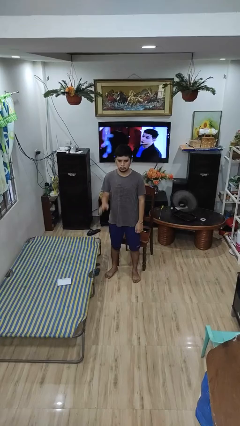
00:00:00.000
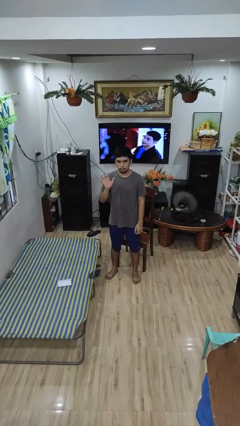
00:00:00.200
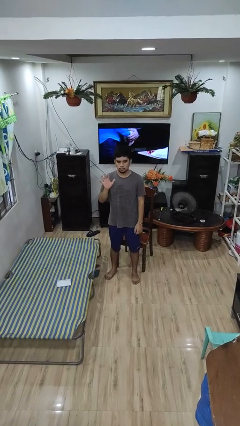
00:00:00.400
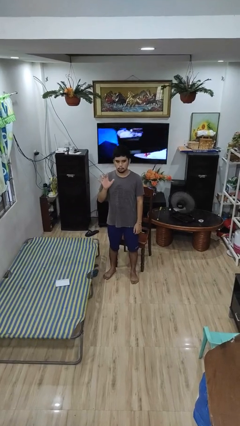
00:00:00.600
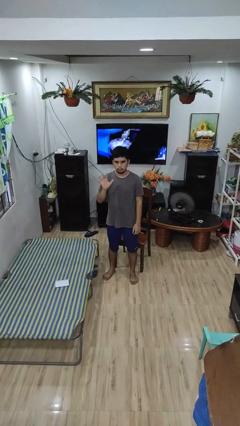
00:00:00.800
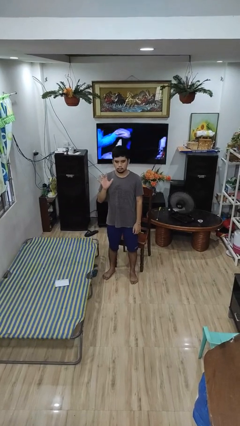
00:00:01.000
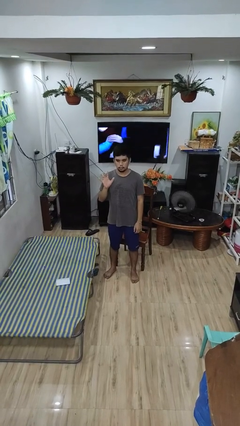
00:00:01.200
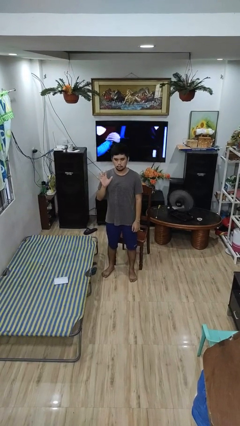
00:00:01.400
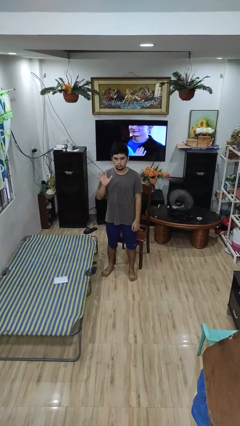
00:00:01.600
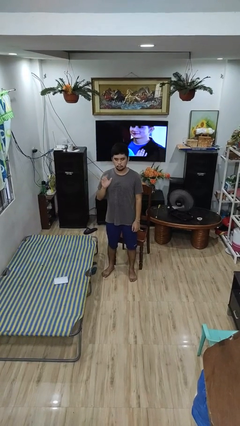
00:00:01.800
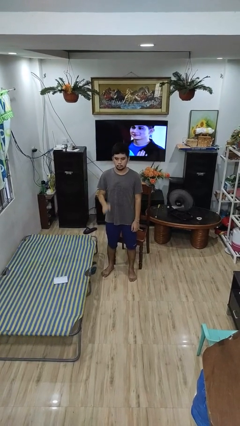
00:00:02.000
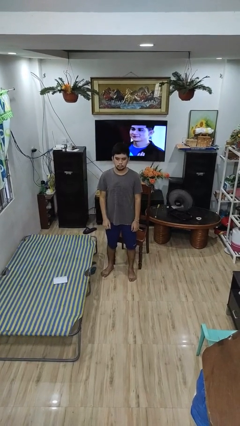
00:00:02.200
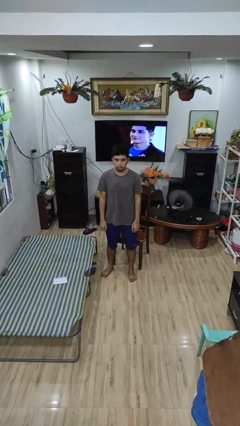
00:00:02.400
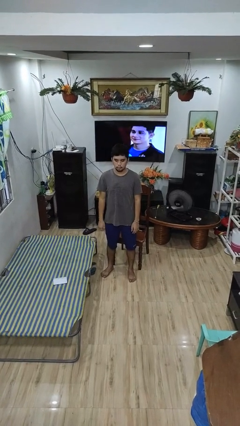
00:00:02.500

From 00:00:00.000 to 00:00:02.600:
person gestures number five

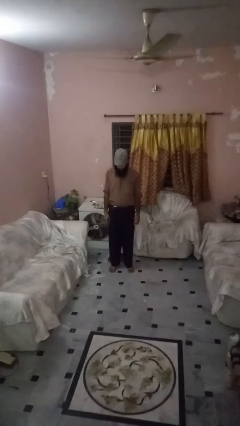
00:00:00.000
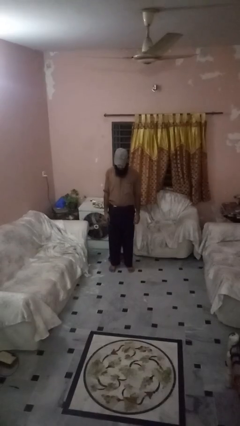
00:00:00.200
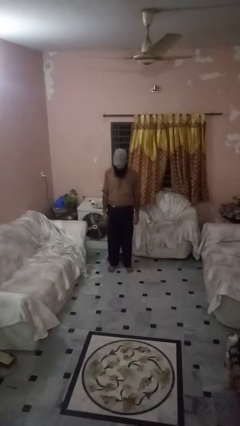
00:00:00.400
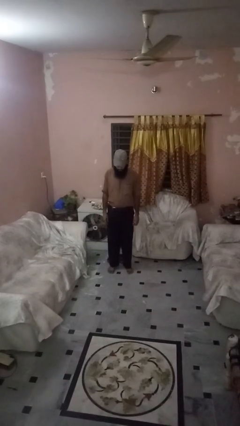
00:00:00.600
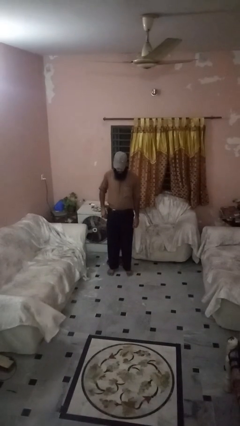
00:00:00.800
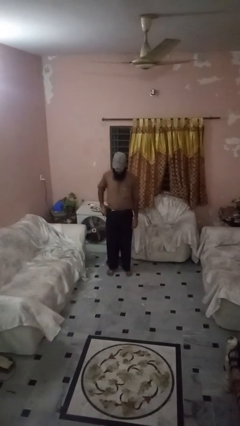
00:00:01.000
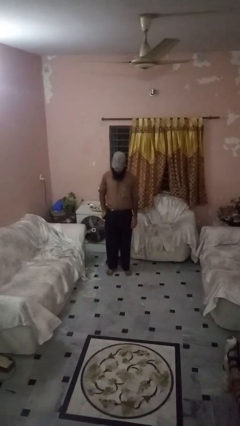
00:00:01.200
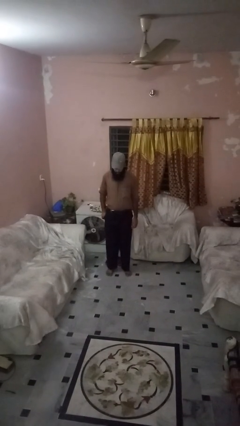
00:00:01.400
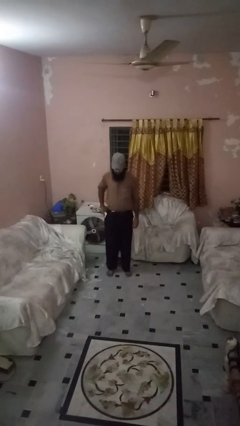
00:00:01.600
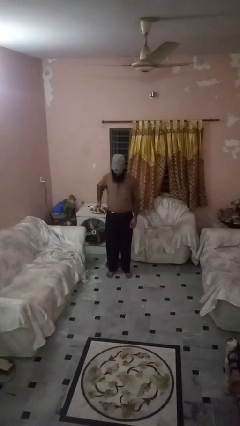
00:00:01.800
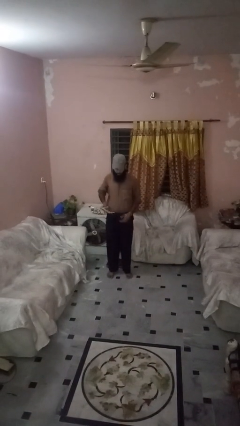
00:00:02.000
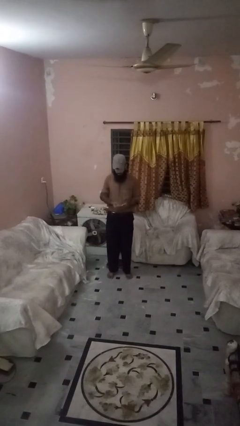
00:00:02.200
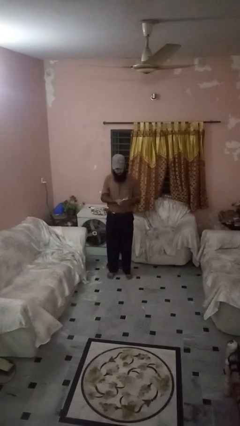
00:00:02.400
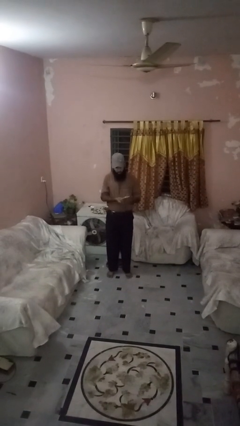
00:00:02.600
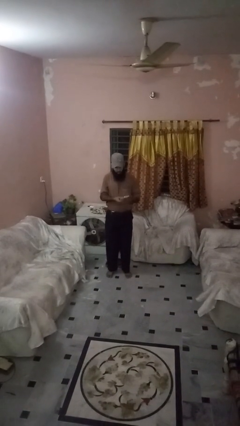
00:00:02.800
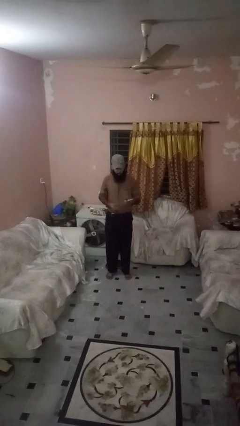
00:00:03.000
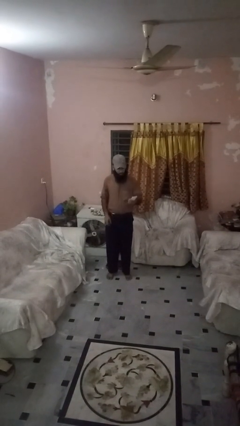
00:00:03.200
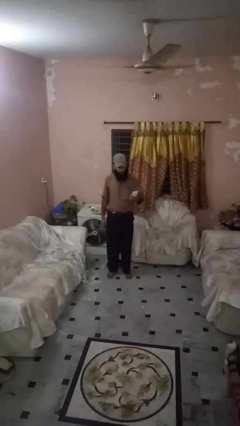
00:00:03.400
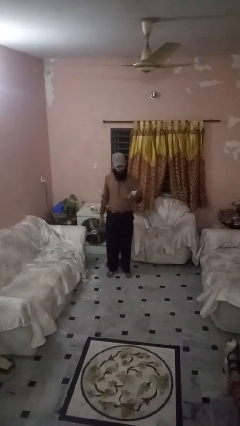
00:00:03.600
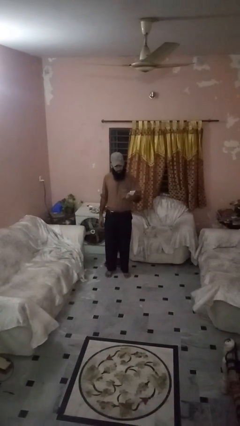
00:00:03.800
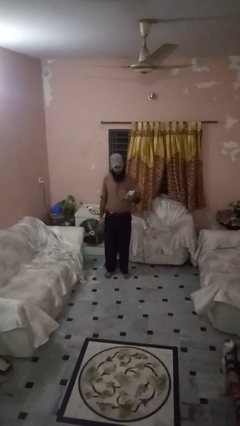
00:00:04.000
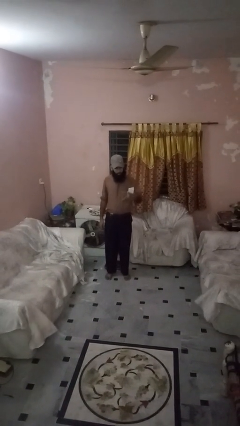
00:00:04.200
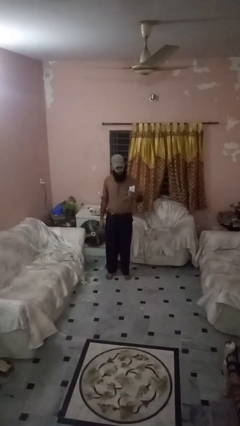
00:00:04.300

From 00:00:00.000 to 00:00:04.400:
person takes phone from pocket

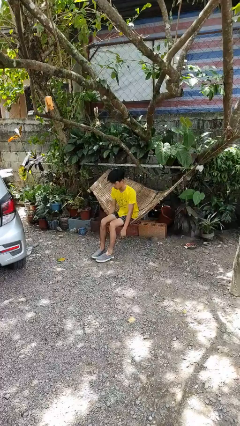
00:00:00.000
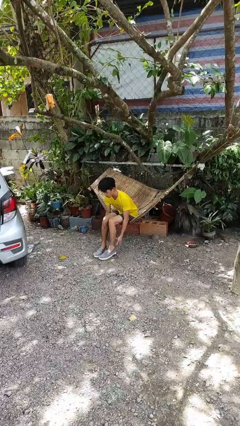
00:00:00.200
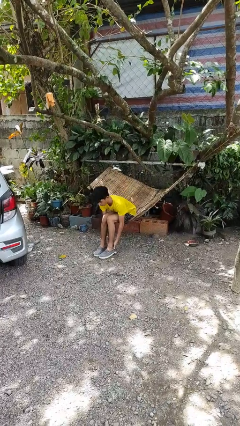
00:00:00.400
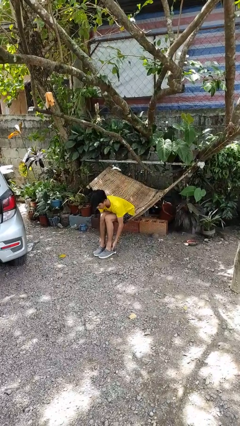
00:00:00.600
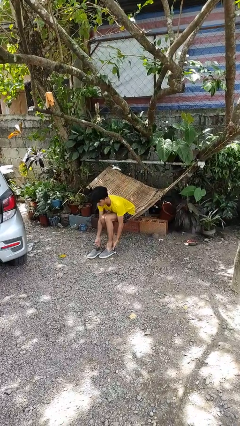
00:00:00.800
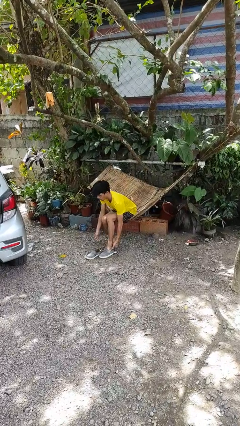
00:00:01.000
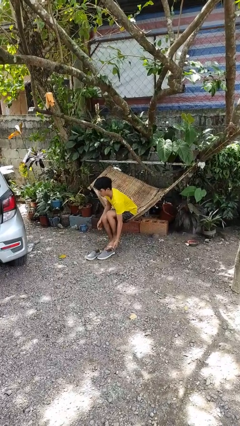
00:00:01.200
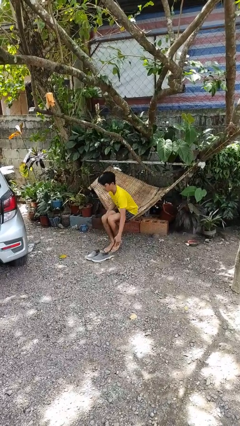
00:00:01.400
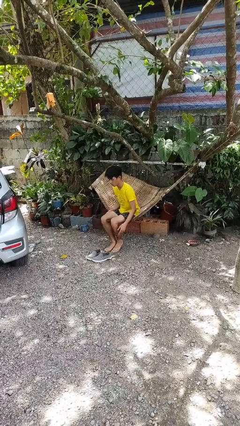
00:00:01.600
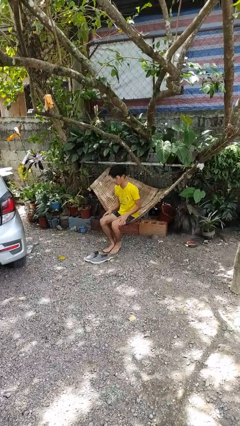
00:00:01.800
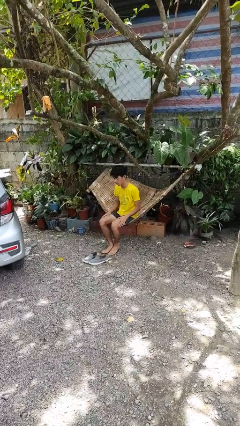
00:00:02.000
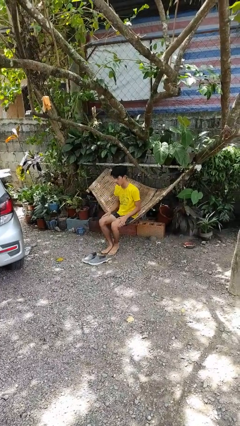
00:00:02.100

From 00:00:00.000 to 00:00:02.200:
person takes off shoes

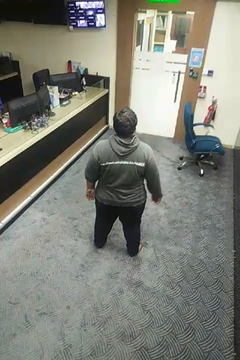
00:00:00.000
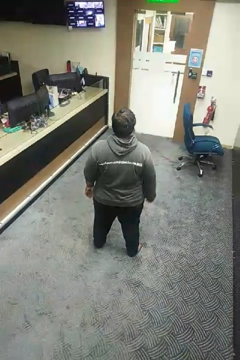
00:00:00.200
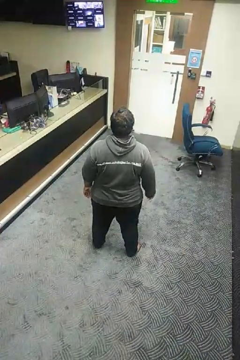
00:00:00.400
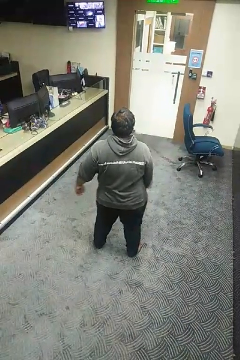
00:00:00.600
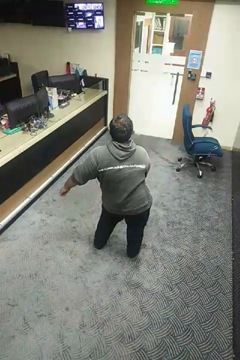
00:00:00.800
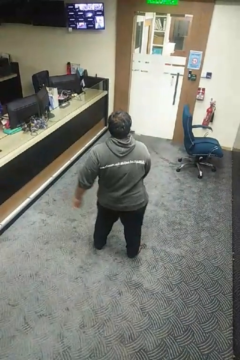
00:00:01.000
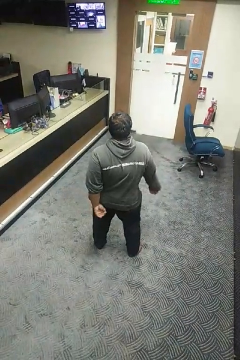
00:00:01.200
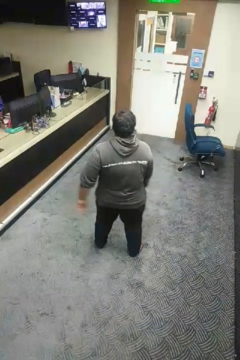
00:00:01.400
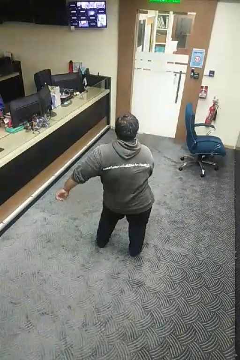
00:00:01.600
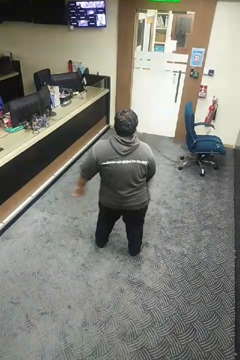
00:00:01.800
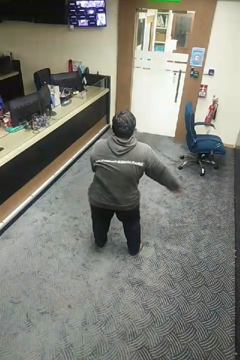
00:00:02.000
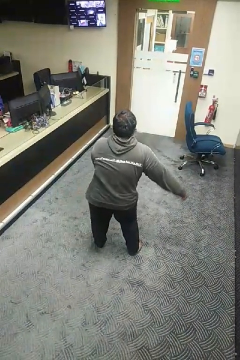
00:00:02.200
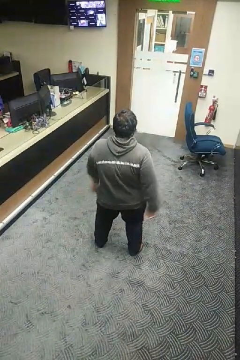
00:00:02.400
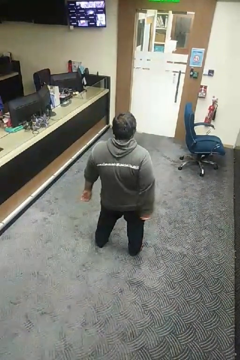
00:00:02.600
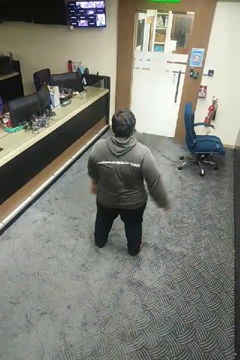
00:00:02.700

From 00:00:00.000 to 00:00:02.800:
person dances in place

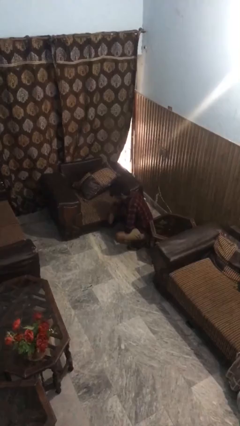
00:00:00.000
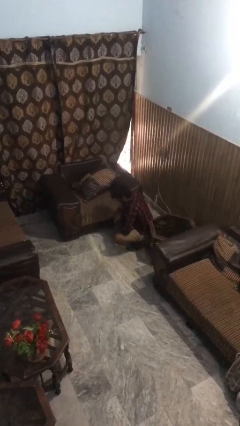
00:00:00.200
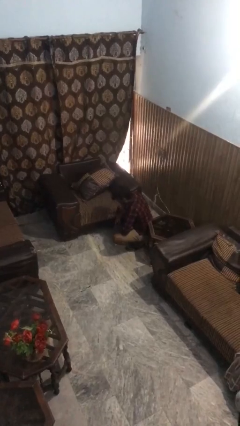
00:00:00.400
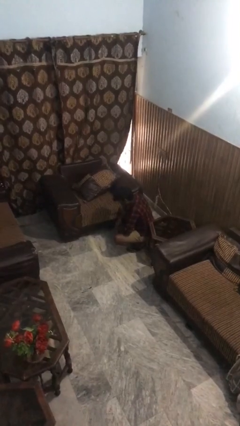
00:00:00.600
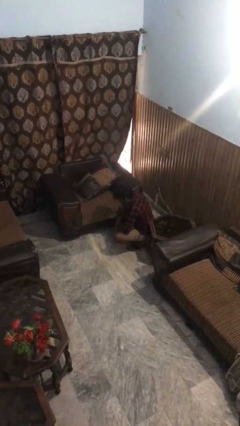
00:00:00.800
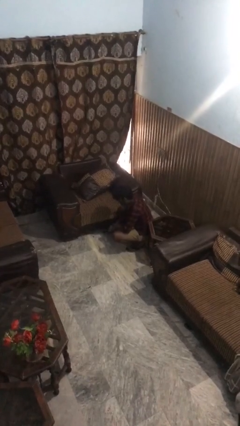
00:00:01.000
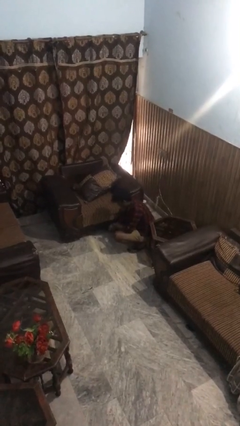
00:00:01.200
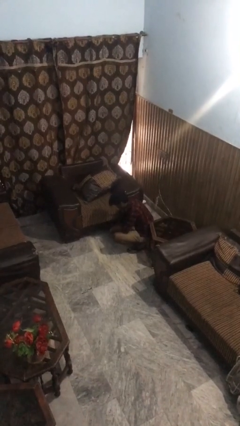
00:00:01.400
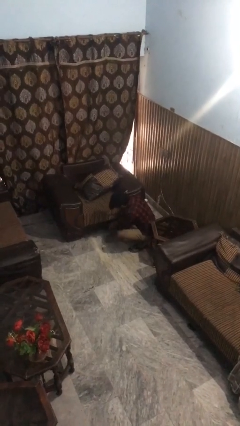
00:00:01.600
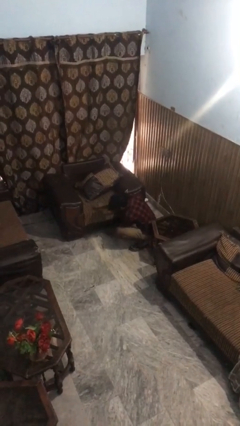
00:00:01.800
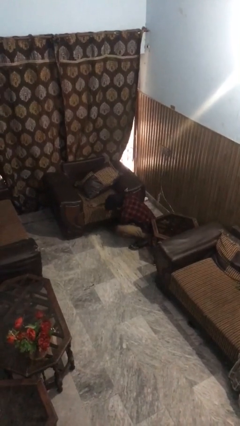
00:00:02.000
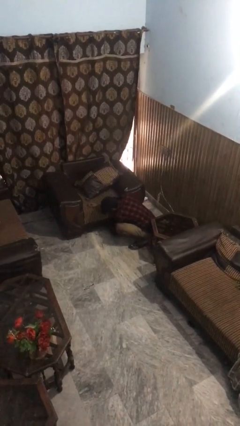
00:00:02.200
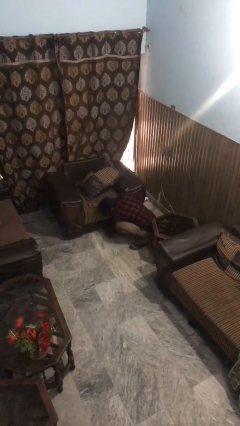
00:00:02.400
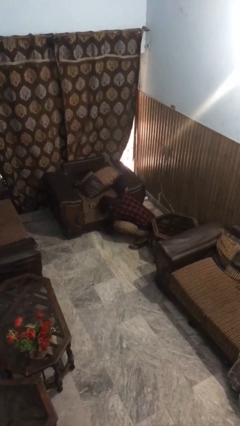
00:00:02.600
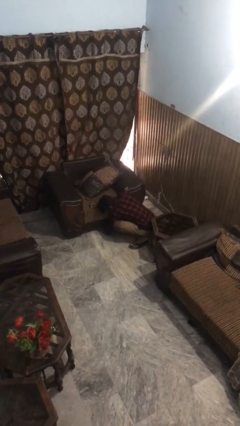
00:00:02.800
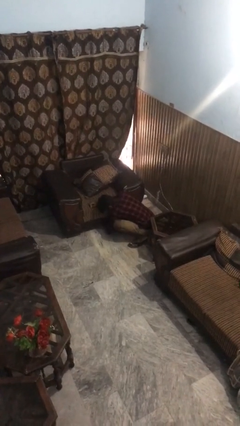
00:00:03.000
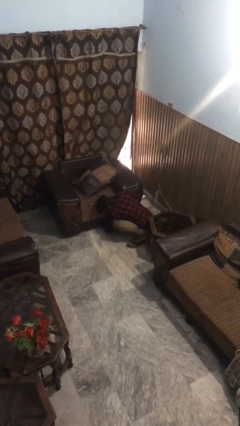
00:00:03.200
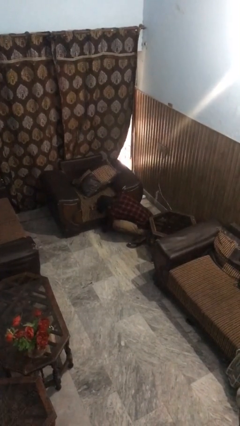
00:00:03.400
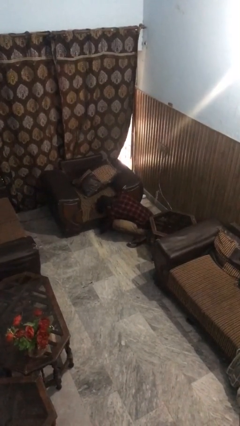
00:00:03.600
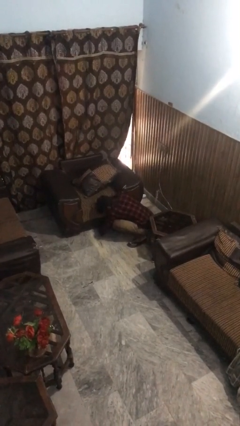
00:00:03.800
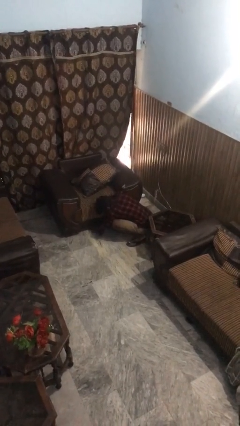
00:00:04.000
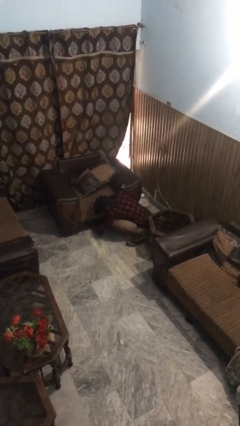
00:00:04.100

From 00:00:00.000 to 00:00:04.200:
person searches under couch

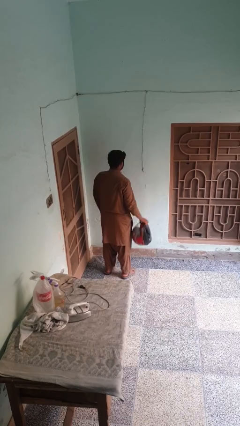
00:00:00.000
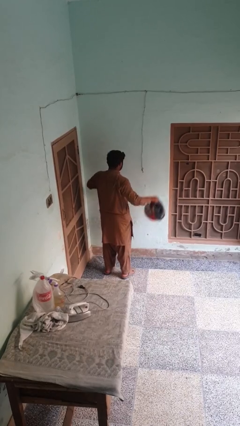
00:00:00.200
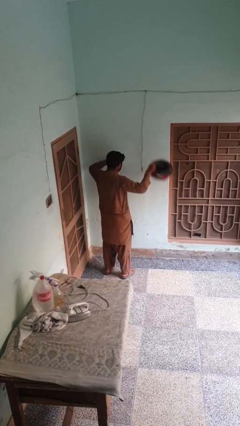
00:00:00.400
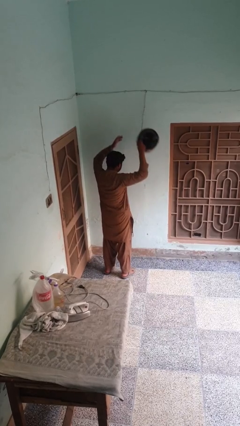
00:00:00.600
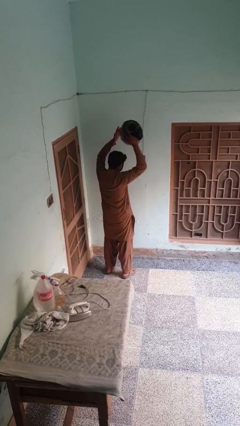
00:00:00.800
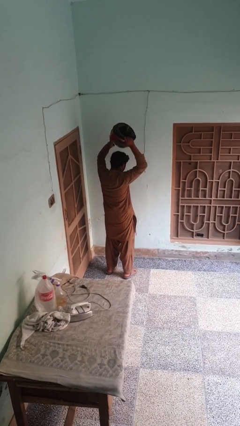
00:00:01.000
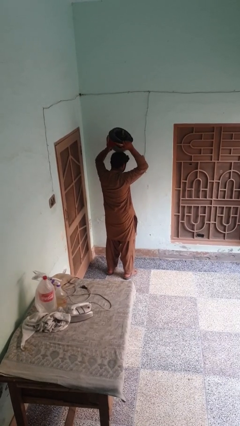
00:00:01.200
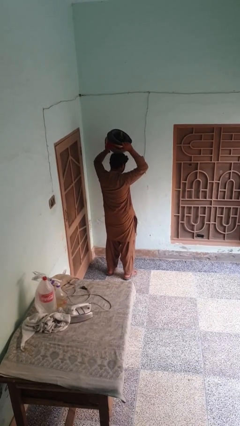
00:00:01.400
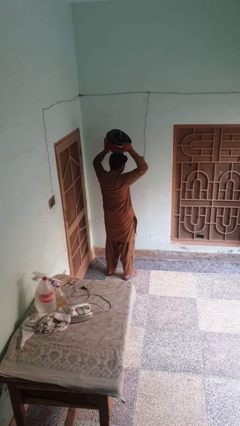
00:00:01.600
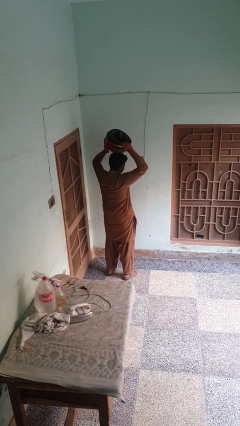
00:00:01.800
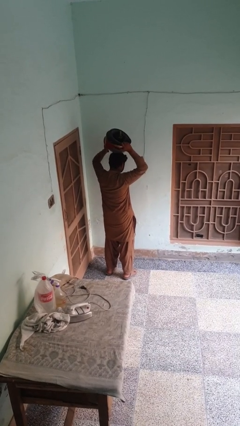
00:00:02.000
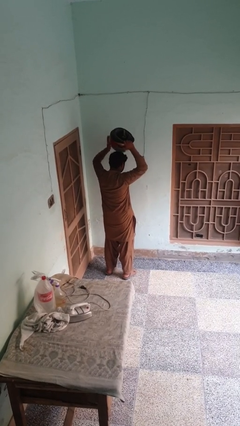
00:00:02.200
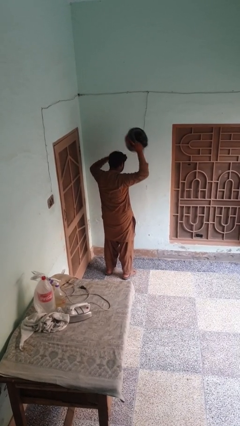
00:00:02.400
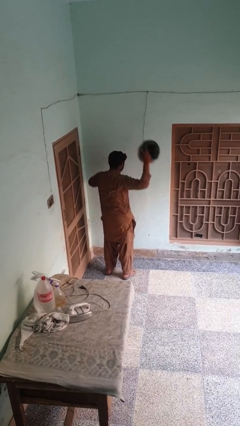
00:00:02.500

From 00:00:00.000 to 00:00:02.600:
person holds object above head
